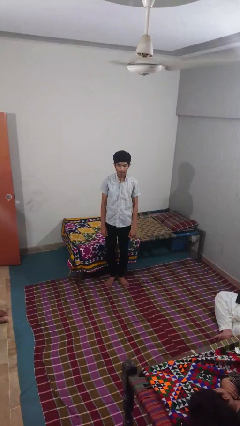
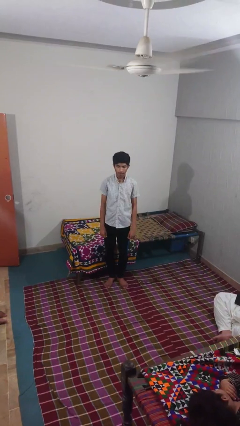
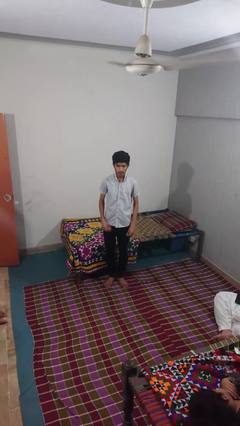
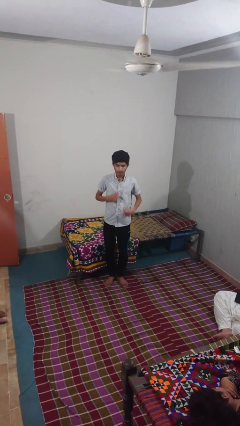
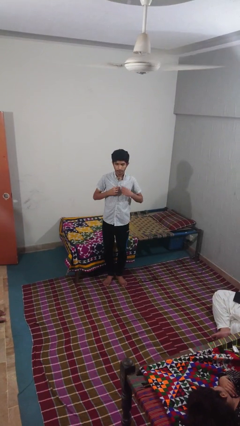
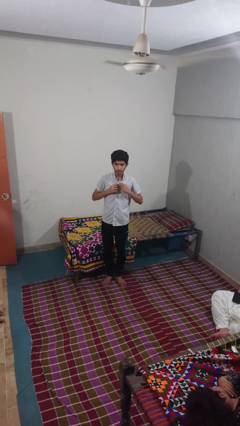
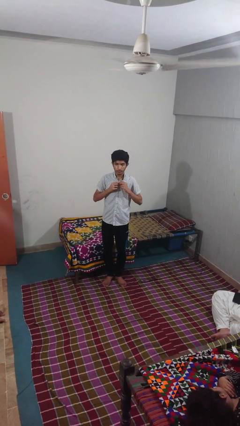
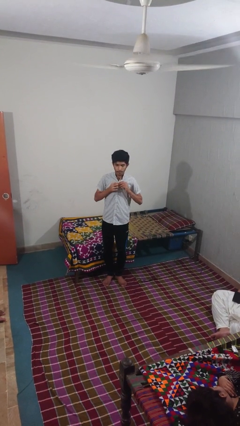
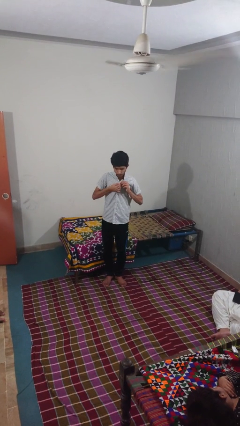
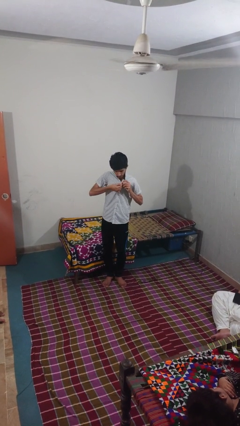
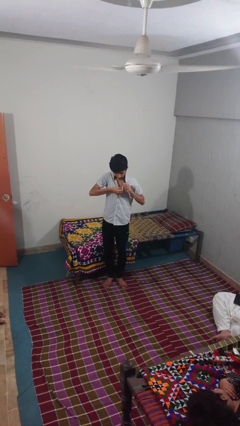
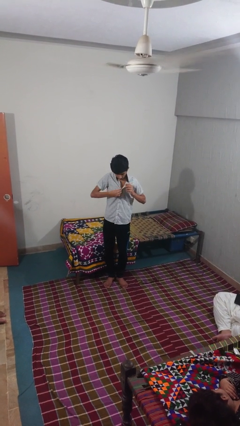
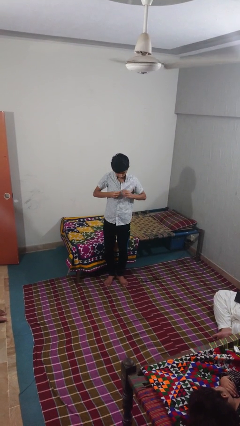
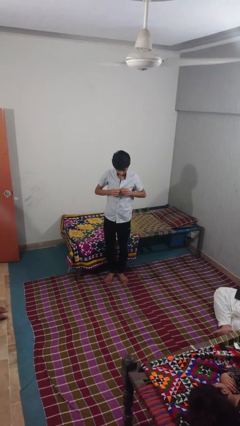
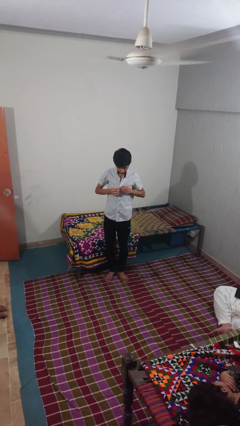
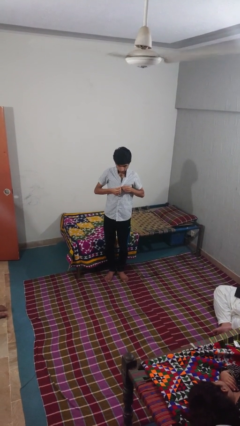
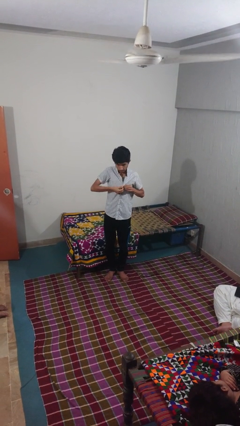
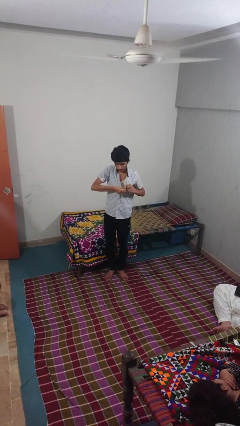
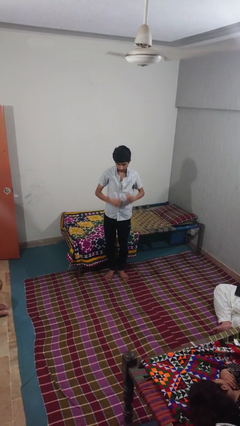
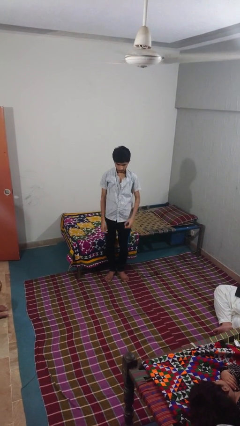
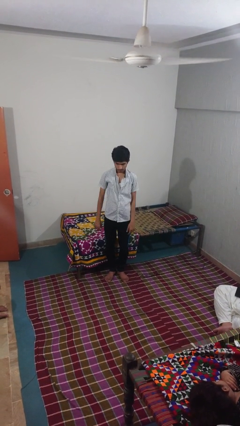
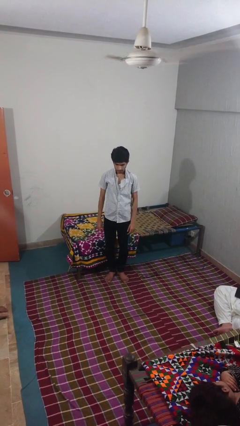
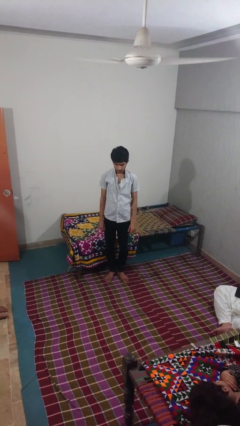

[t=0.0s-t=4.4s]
person unbuttons shirt

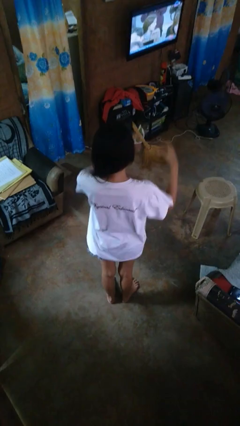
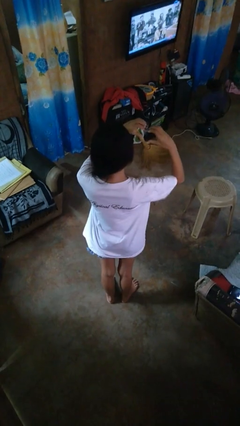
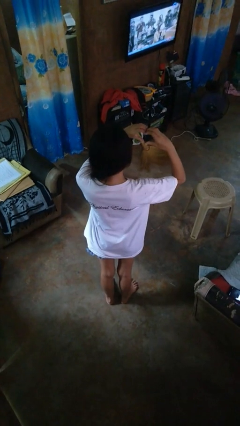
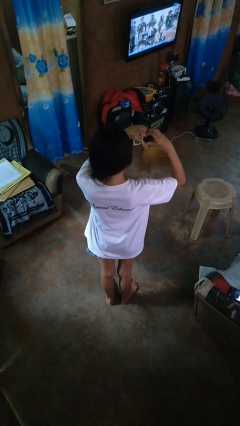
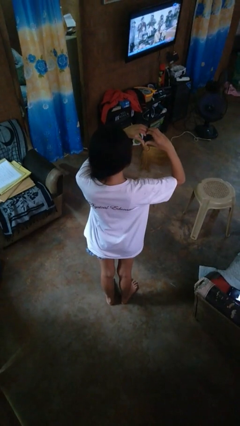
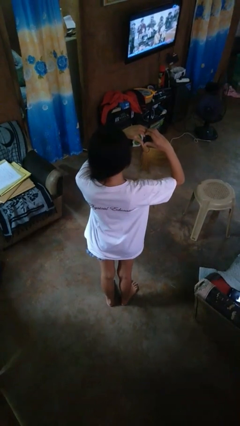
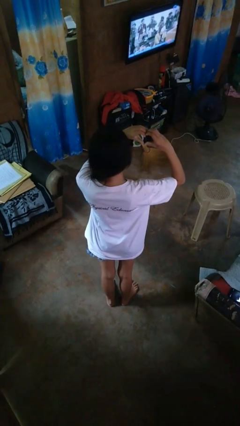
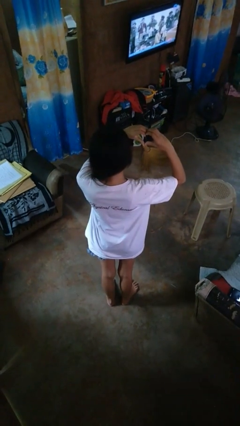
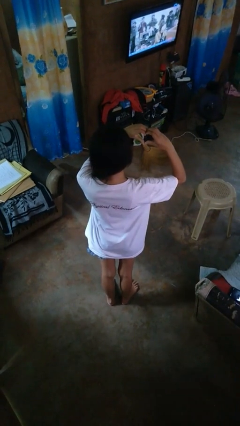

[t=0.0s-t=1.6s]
person gestures heart

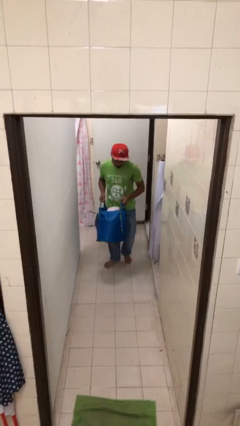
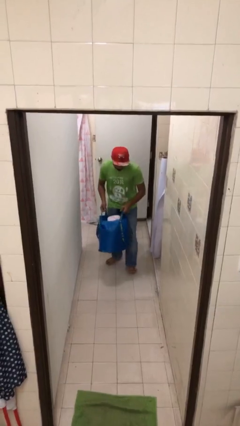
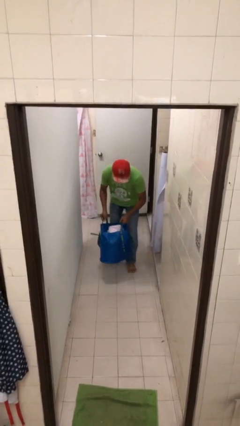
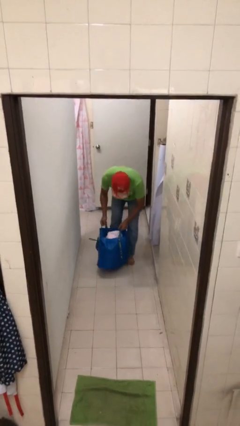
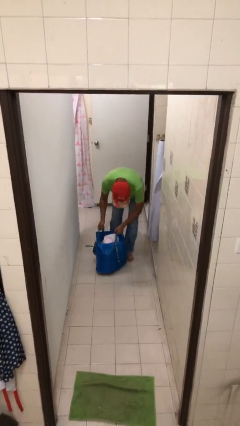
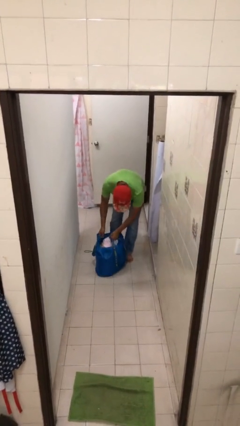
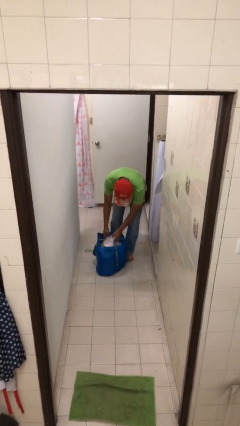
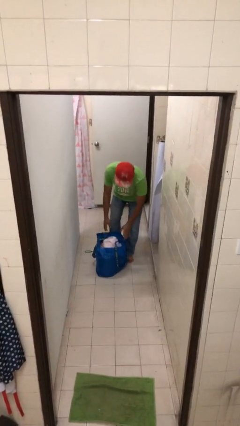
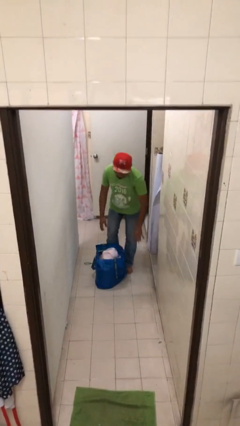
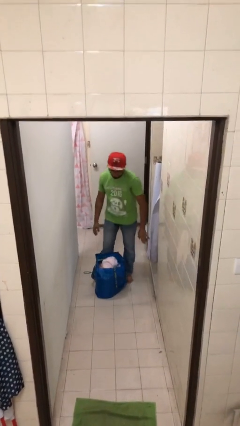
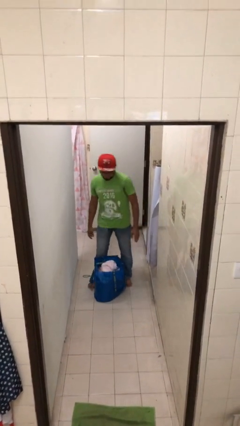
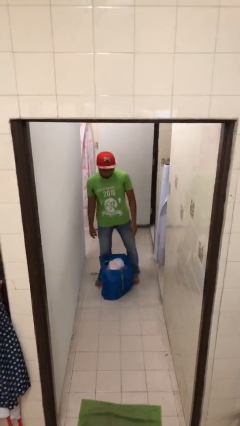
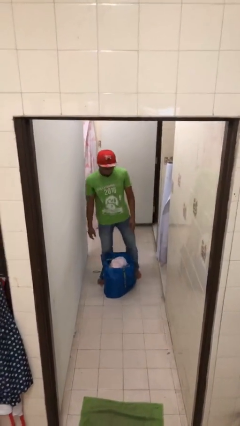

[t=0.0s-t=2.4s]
person puts down object on floor

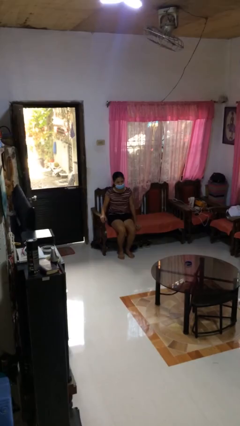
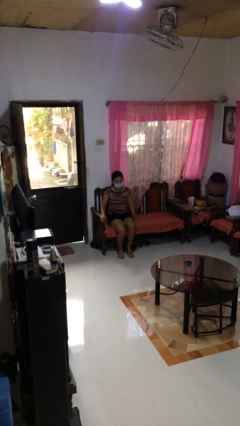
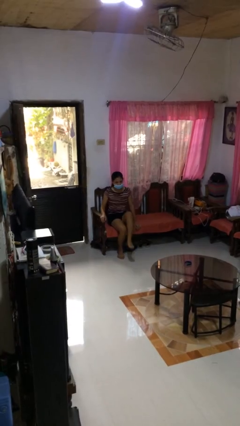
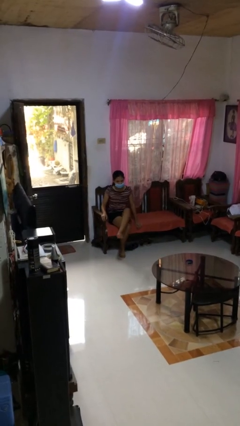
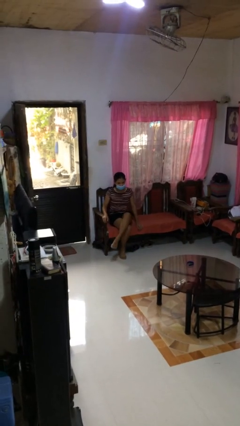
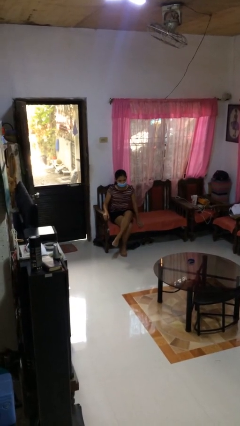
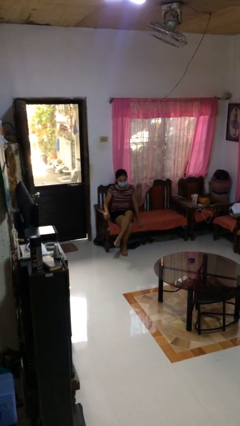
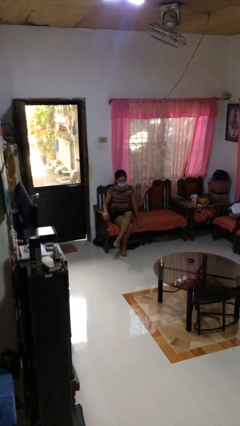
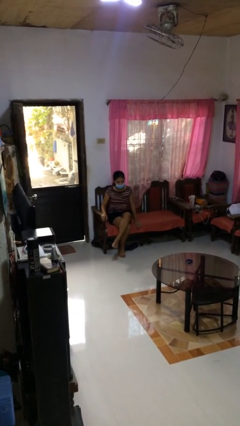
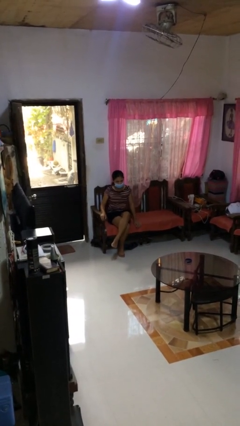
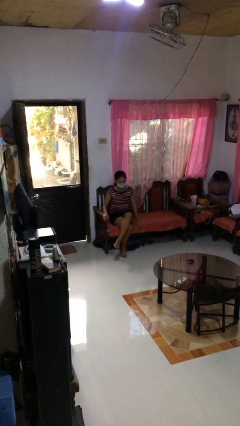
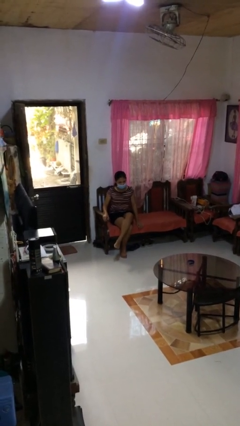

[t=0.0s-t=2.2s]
person crosses legs

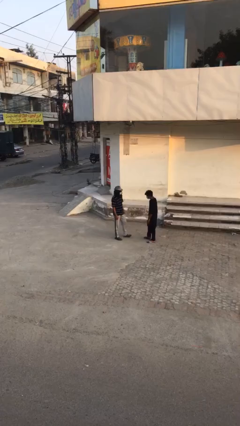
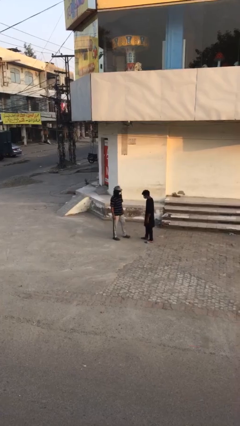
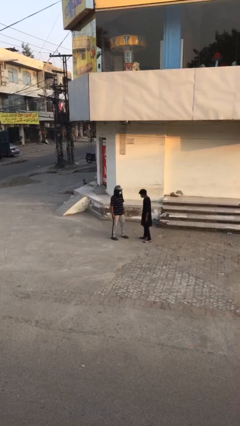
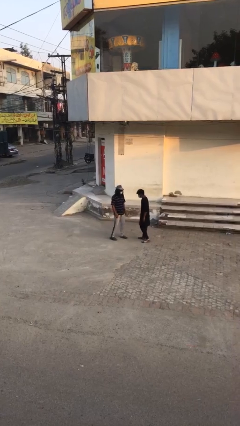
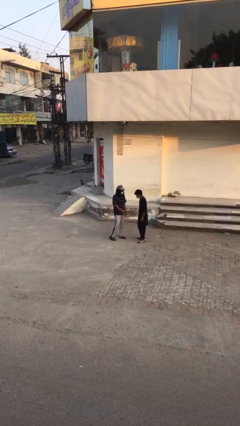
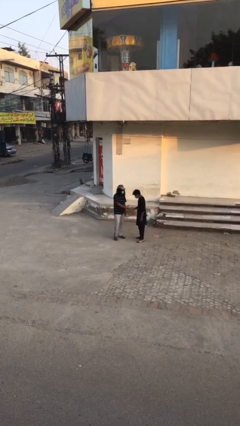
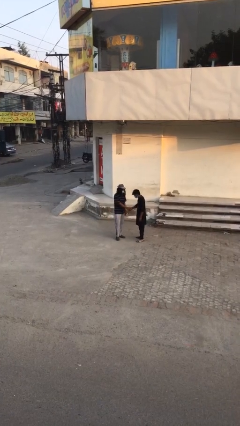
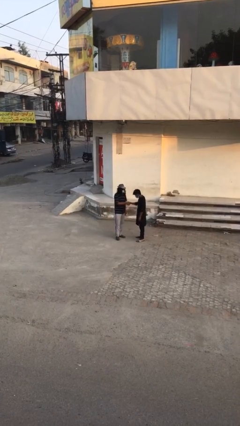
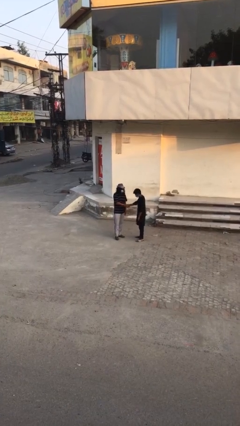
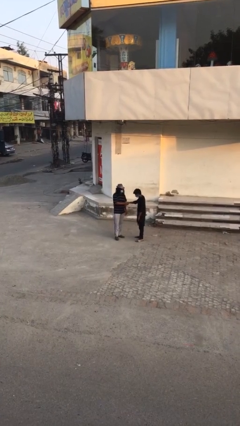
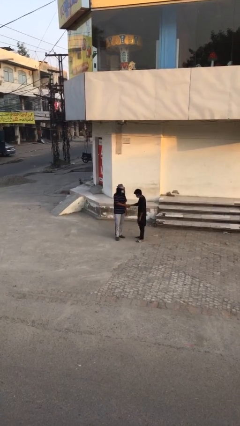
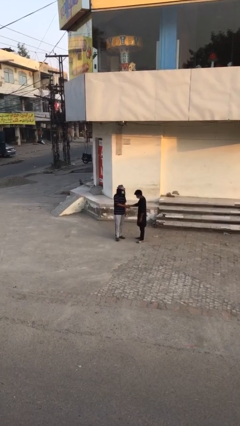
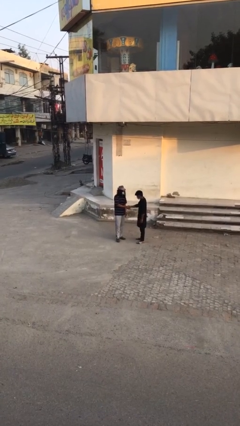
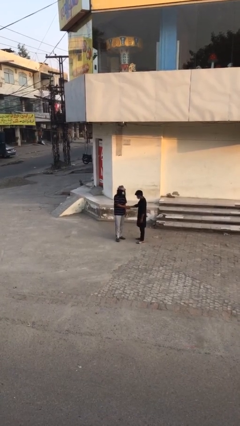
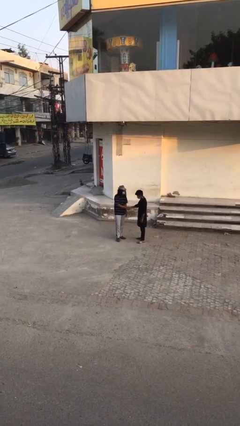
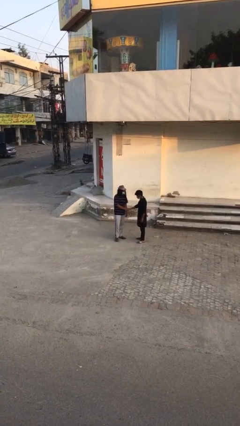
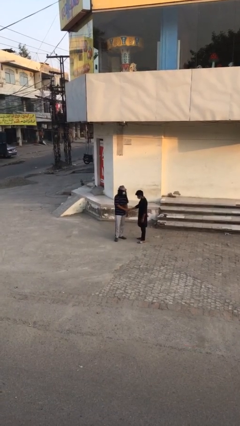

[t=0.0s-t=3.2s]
person shakes hand

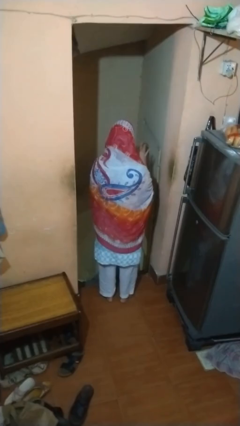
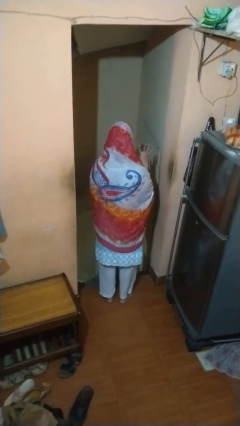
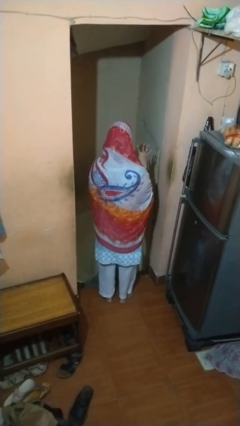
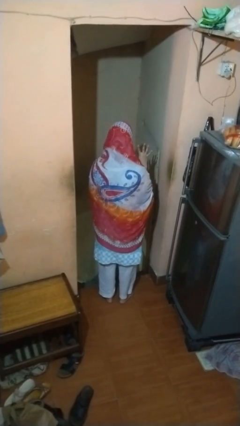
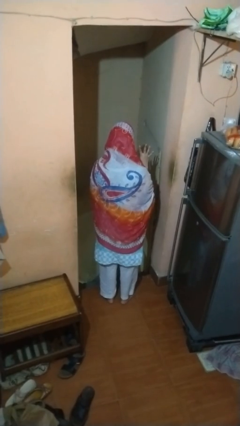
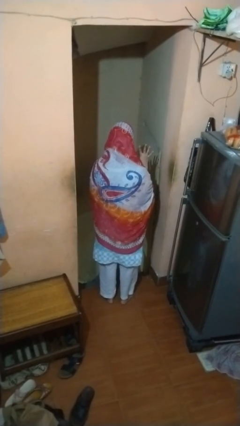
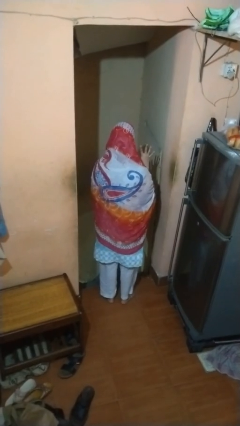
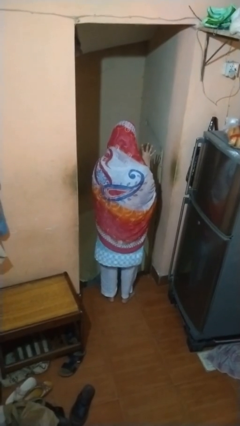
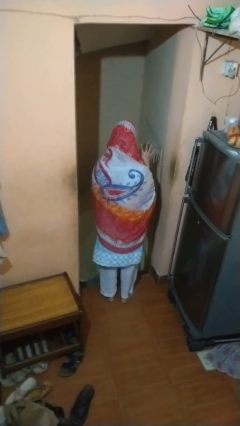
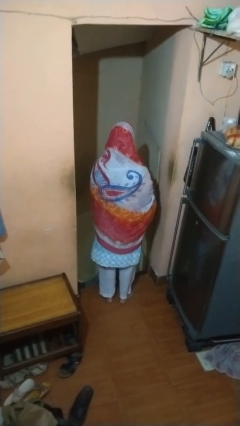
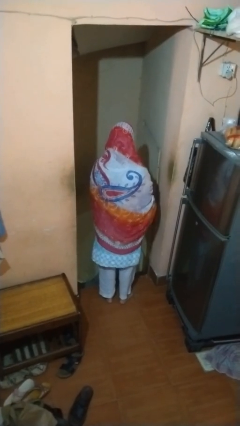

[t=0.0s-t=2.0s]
person gestures number four

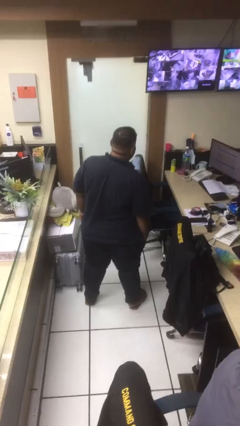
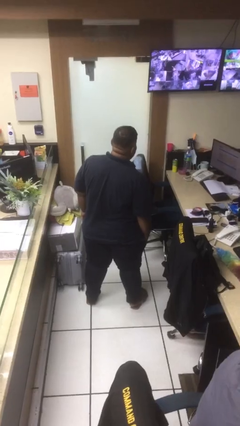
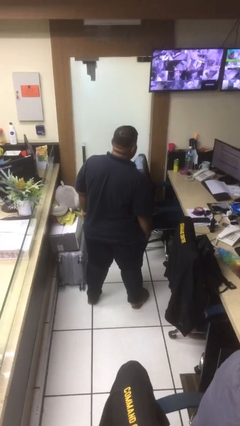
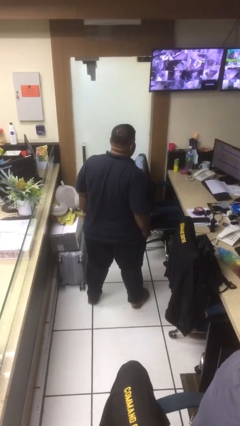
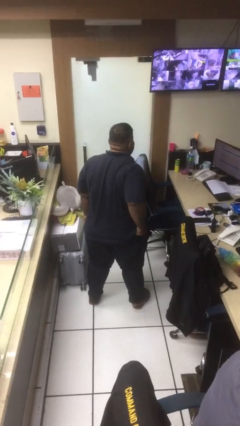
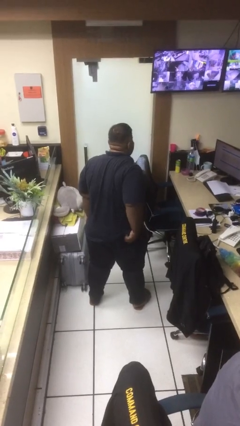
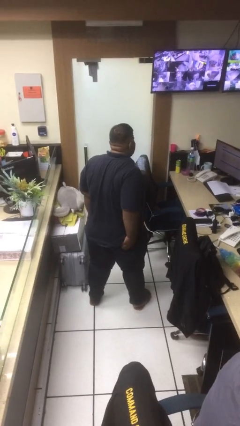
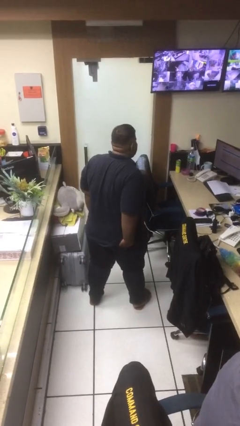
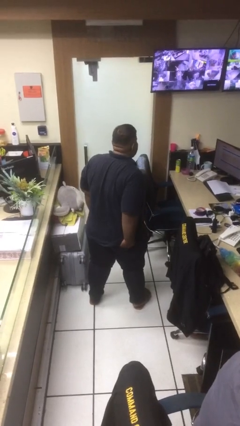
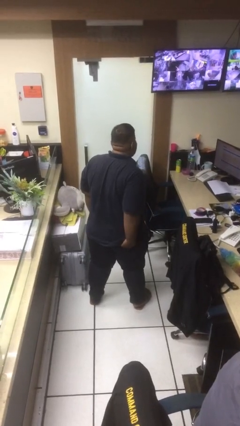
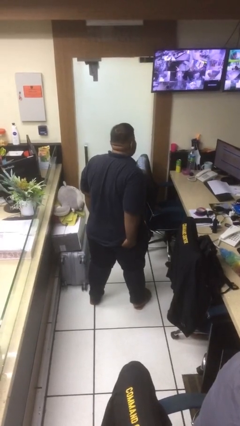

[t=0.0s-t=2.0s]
person puts hands in back pockets
